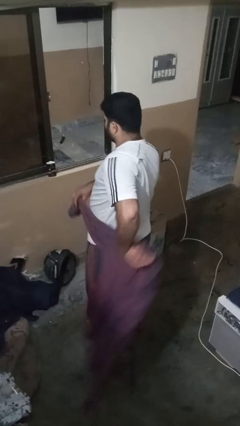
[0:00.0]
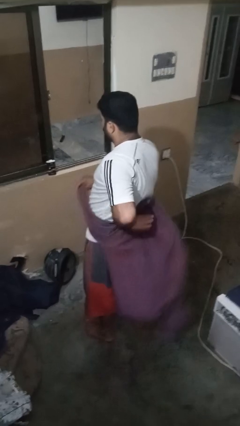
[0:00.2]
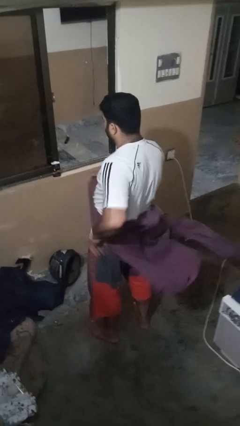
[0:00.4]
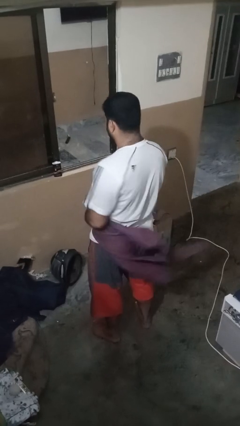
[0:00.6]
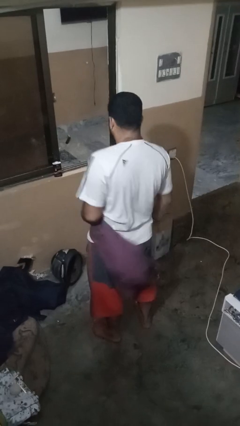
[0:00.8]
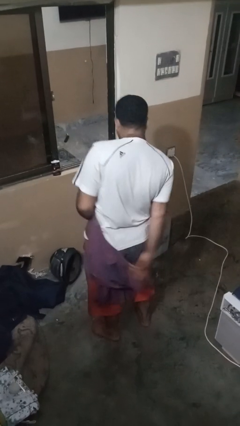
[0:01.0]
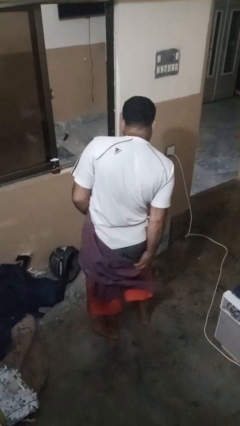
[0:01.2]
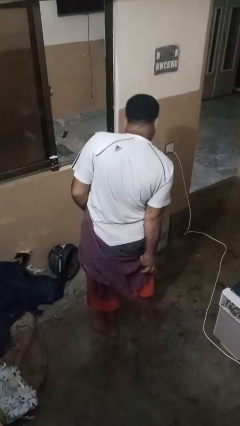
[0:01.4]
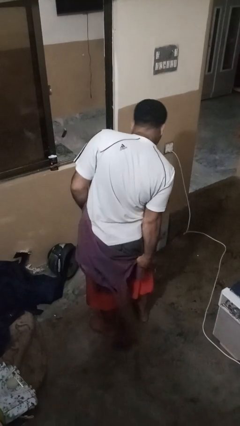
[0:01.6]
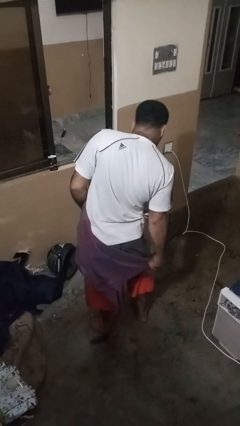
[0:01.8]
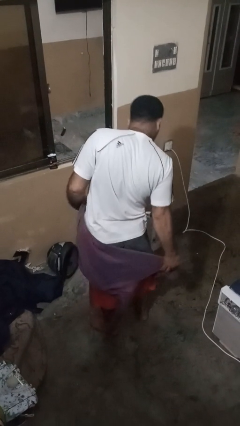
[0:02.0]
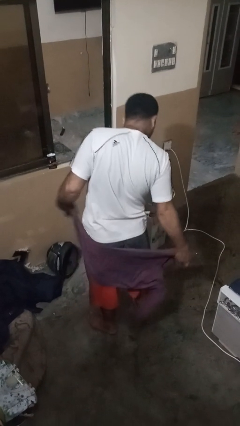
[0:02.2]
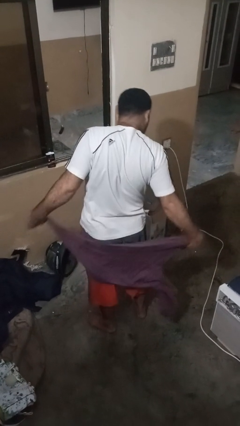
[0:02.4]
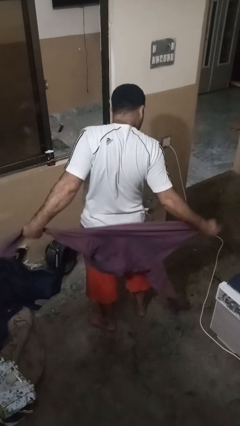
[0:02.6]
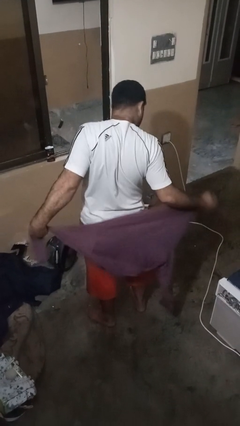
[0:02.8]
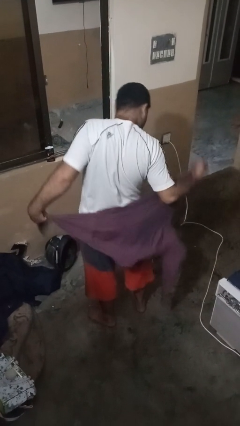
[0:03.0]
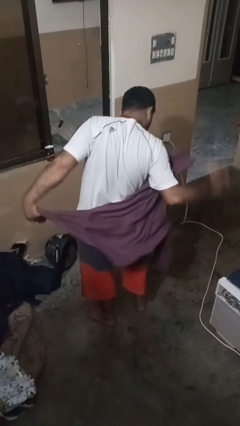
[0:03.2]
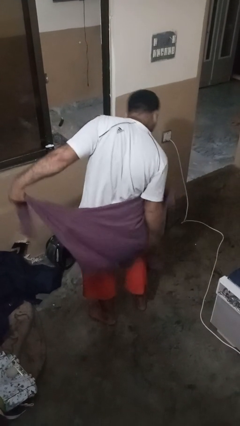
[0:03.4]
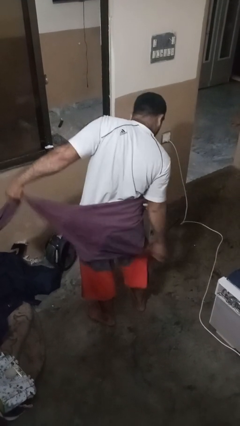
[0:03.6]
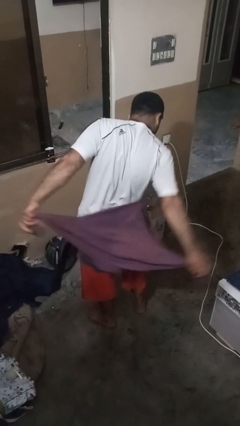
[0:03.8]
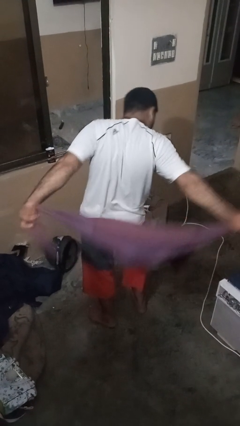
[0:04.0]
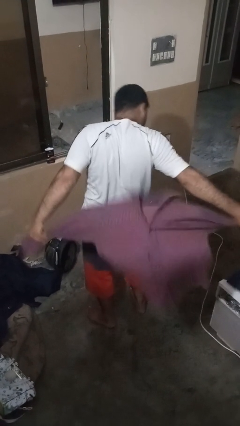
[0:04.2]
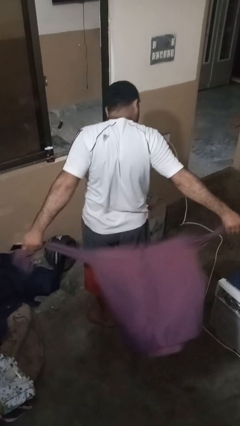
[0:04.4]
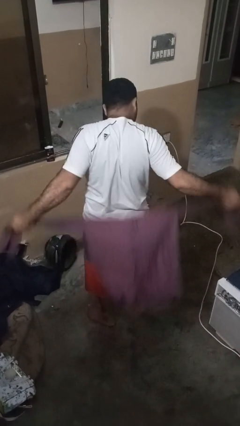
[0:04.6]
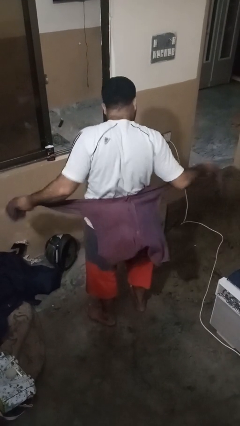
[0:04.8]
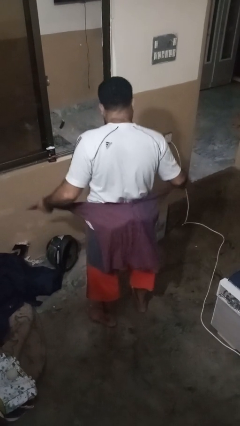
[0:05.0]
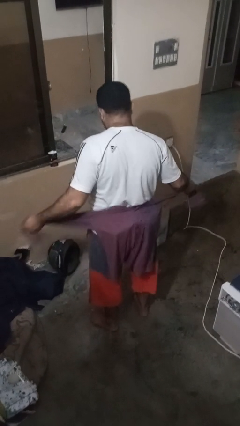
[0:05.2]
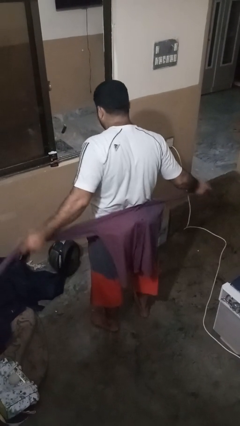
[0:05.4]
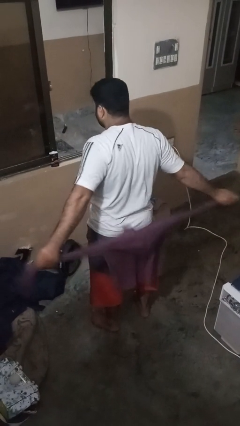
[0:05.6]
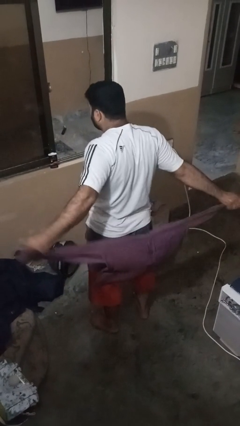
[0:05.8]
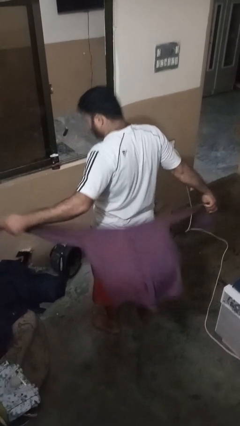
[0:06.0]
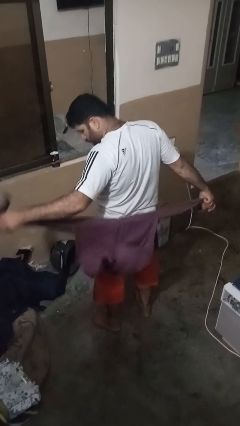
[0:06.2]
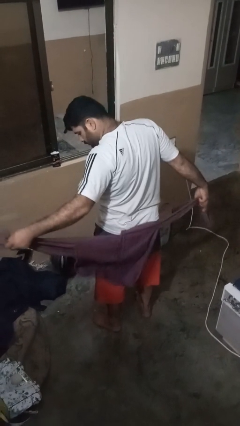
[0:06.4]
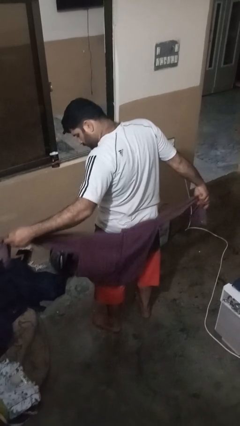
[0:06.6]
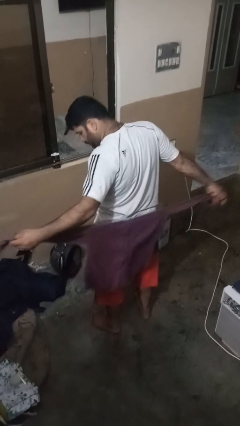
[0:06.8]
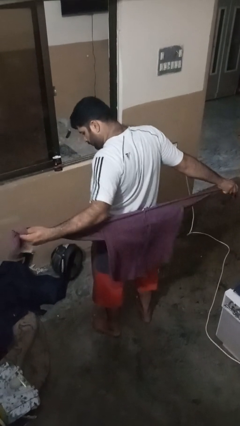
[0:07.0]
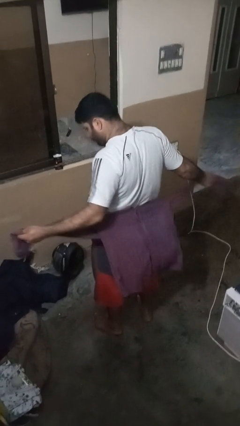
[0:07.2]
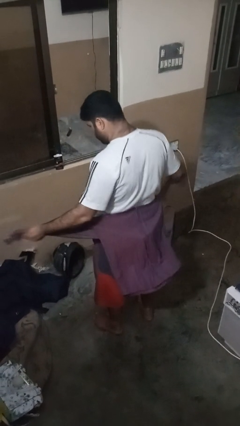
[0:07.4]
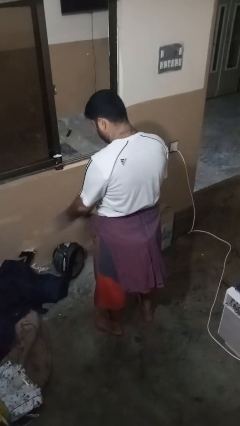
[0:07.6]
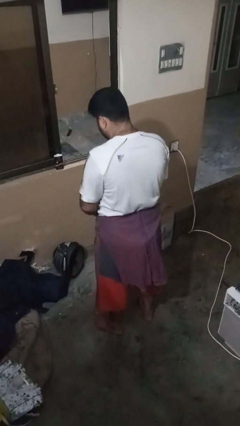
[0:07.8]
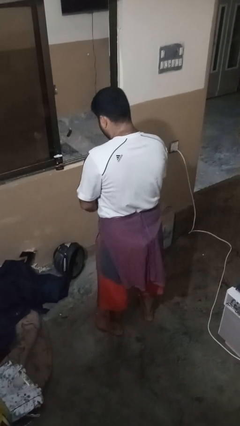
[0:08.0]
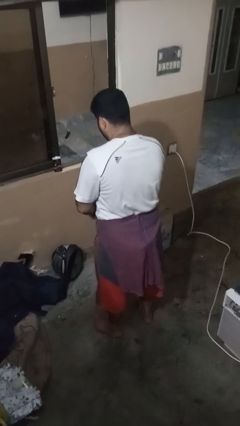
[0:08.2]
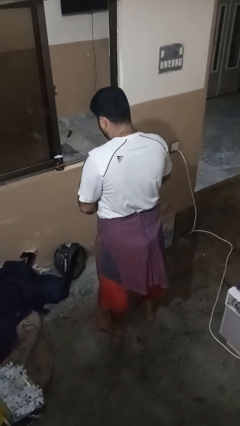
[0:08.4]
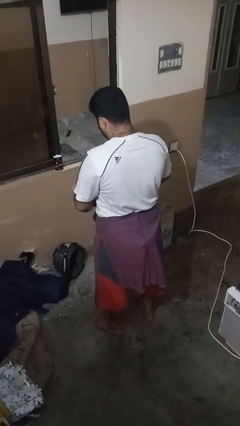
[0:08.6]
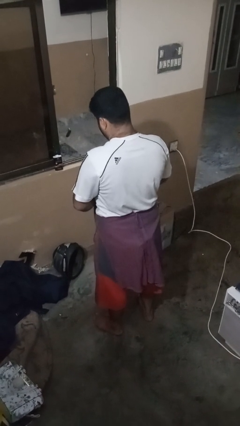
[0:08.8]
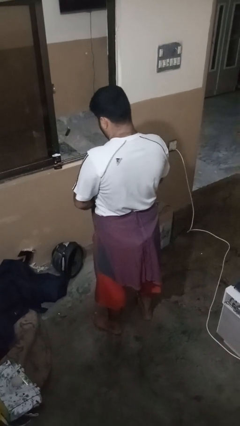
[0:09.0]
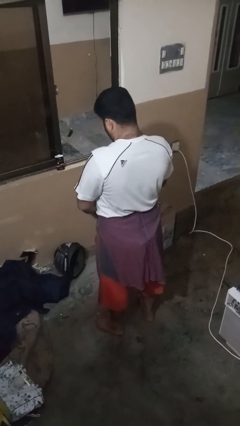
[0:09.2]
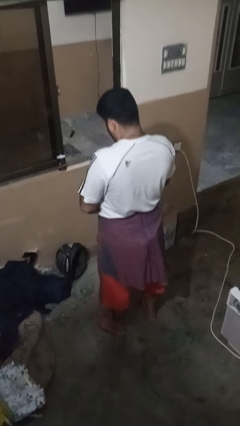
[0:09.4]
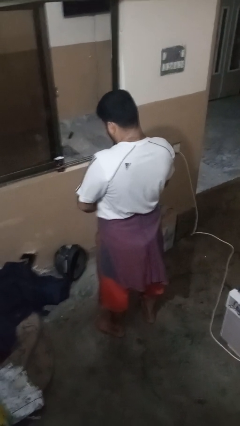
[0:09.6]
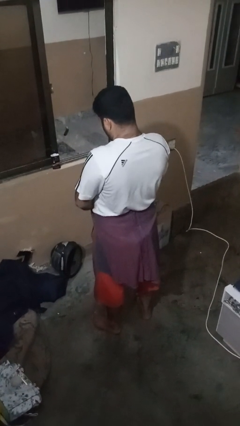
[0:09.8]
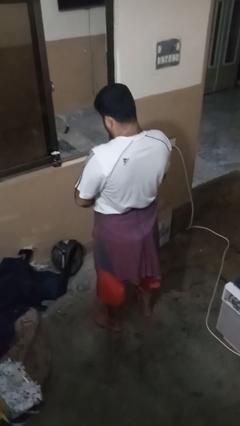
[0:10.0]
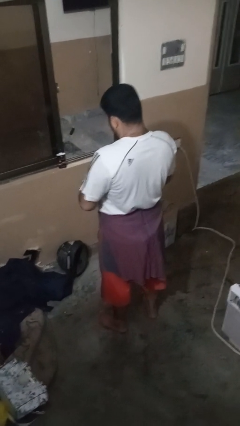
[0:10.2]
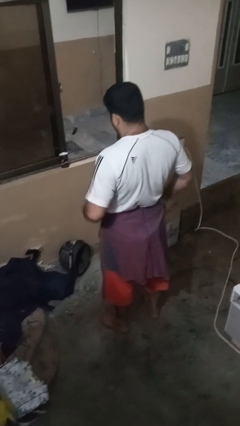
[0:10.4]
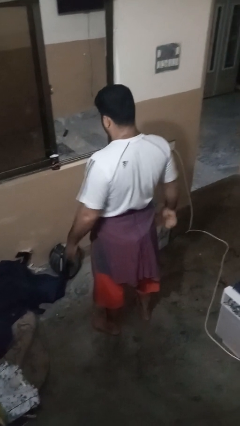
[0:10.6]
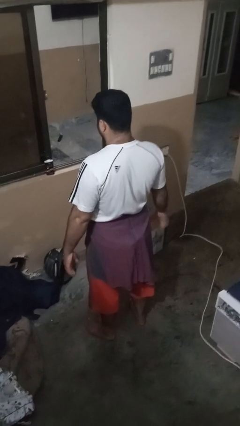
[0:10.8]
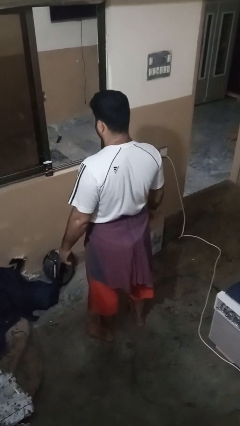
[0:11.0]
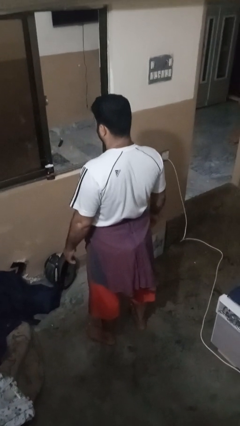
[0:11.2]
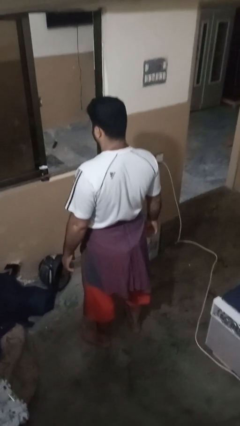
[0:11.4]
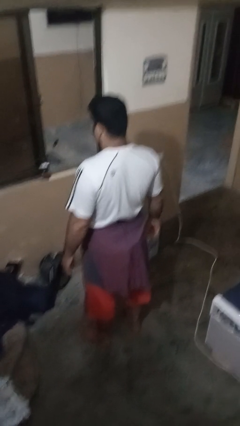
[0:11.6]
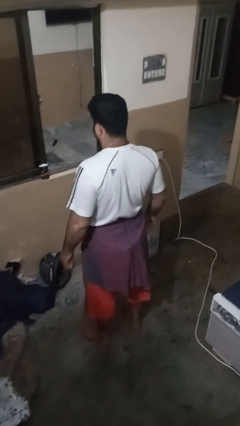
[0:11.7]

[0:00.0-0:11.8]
person ties jacket around waist

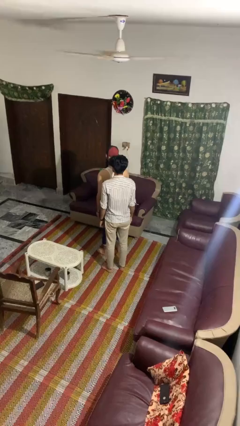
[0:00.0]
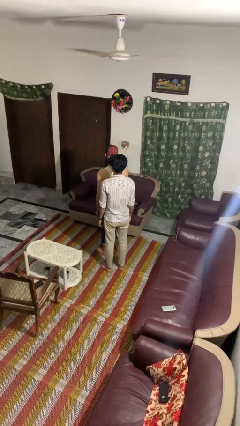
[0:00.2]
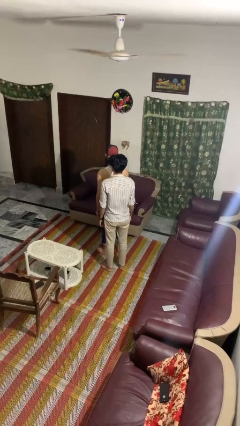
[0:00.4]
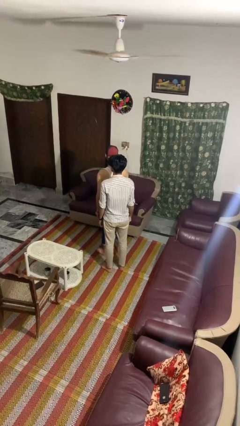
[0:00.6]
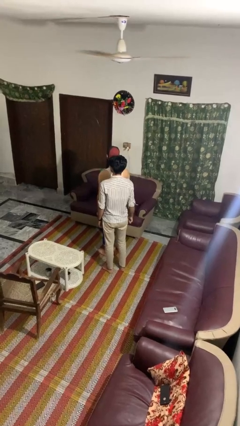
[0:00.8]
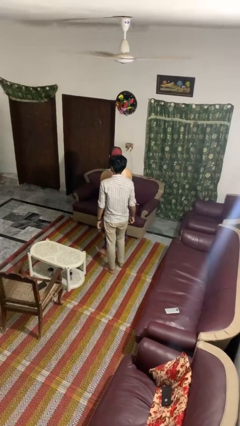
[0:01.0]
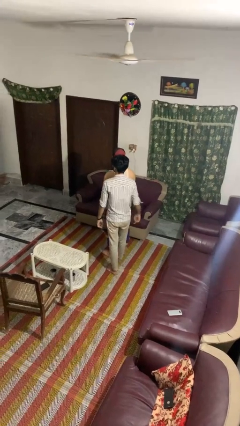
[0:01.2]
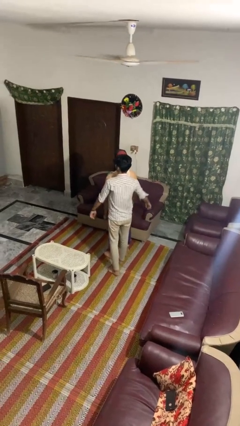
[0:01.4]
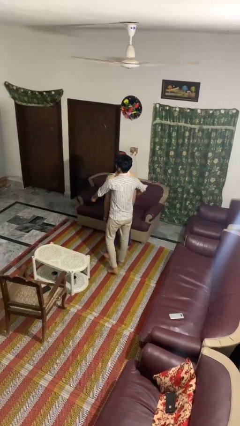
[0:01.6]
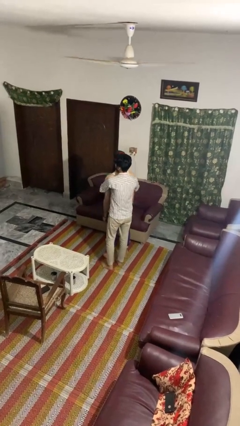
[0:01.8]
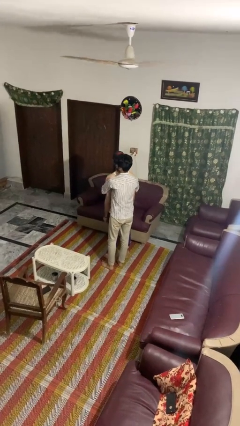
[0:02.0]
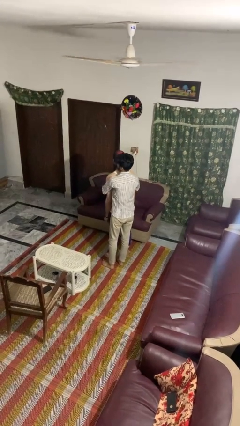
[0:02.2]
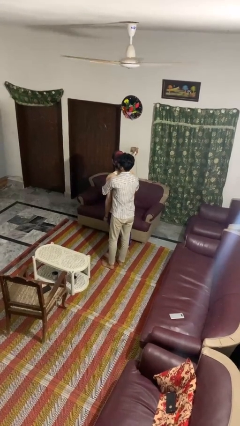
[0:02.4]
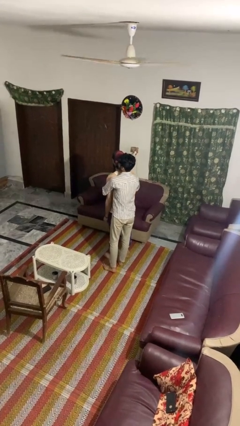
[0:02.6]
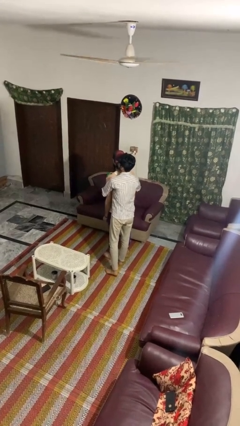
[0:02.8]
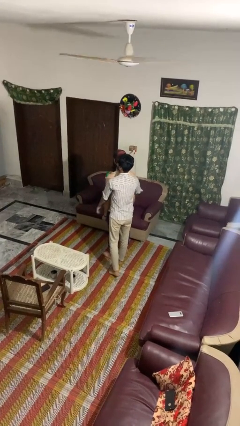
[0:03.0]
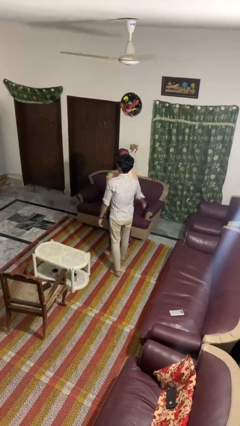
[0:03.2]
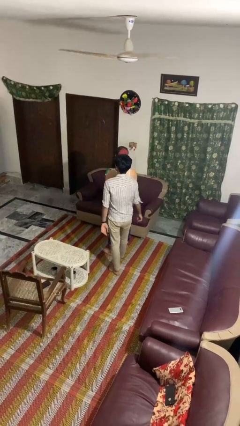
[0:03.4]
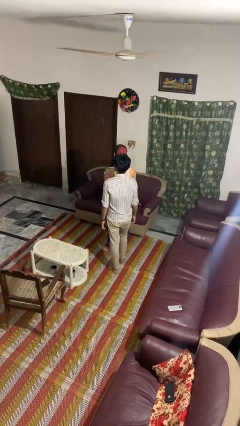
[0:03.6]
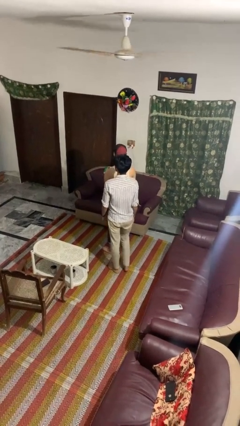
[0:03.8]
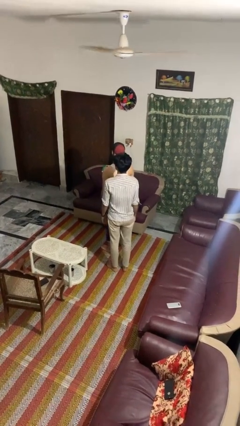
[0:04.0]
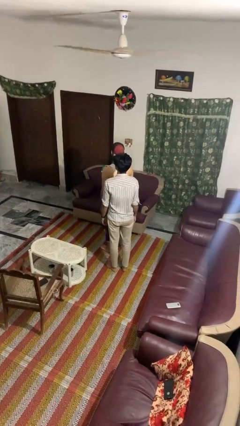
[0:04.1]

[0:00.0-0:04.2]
person hugs person from behind

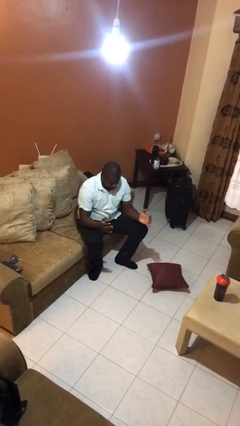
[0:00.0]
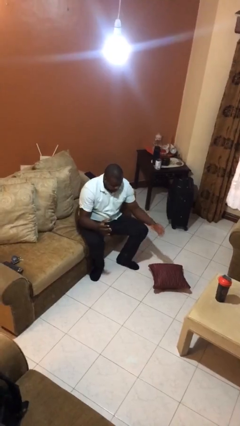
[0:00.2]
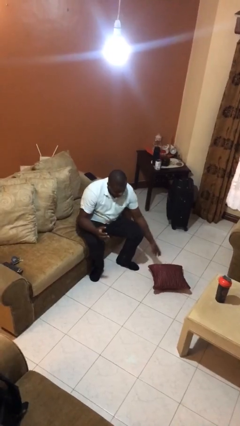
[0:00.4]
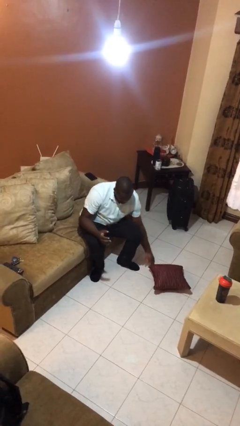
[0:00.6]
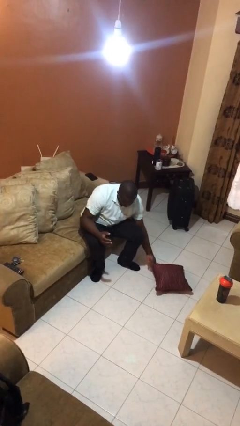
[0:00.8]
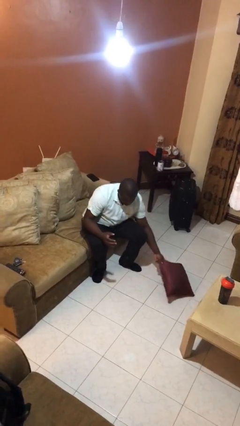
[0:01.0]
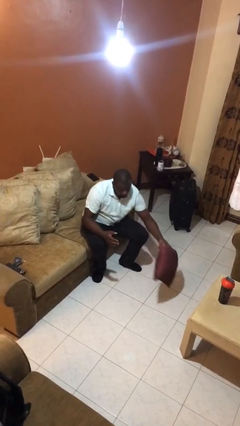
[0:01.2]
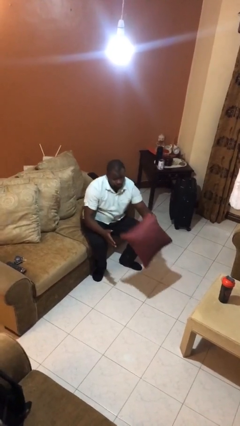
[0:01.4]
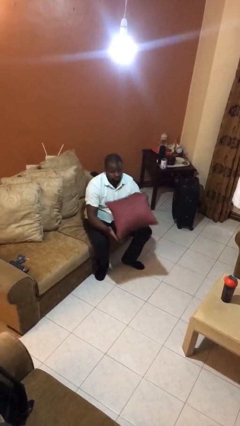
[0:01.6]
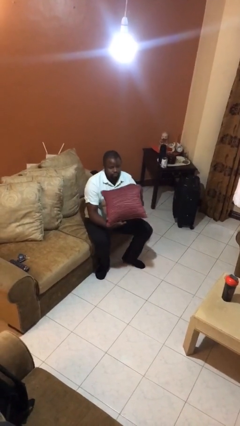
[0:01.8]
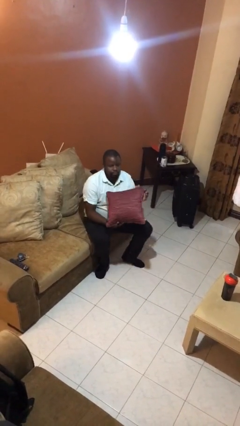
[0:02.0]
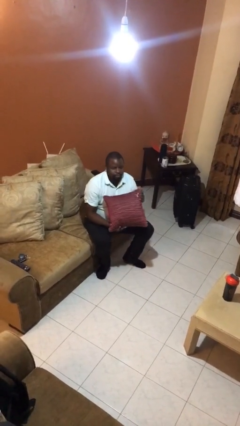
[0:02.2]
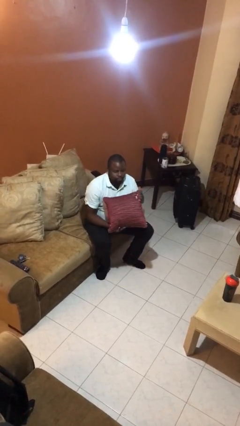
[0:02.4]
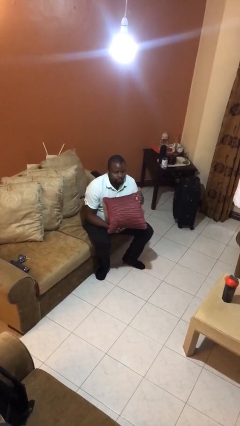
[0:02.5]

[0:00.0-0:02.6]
person picks up object from floor
